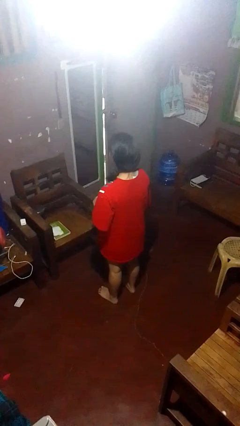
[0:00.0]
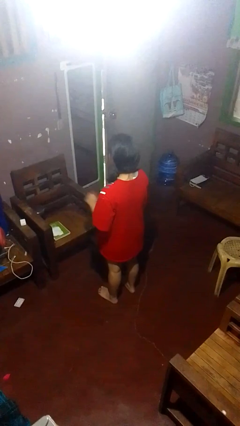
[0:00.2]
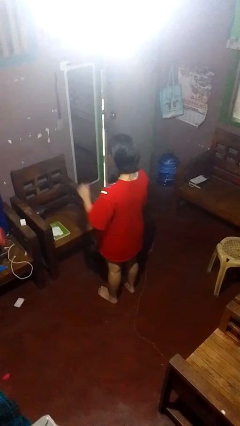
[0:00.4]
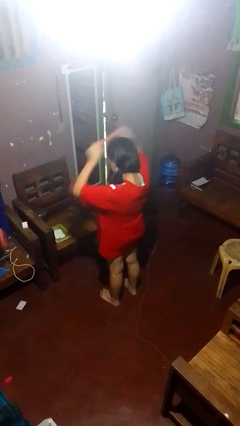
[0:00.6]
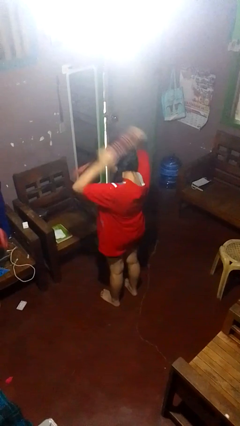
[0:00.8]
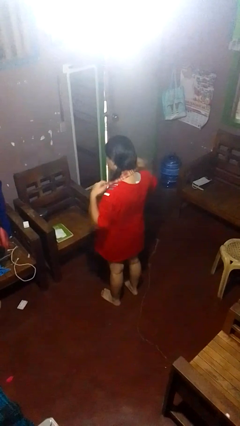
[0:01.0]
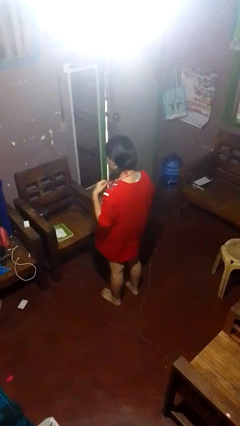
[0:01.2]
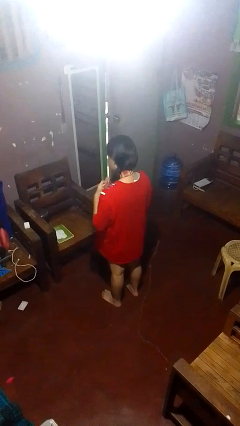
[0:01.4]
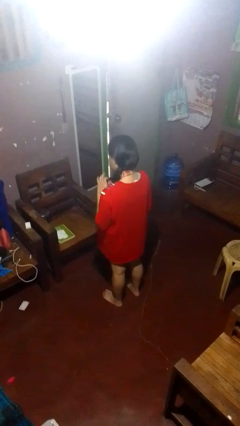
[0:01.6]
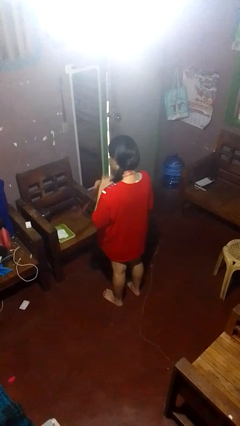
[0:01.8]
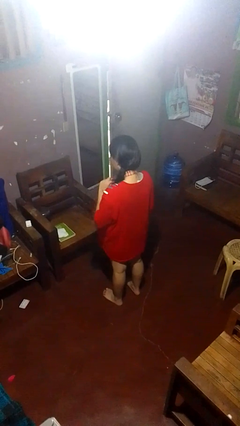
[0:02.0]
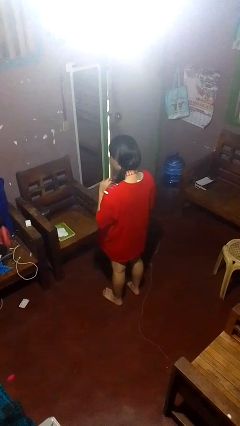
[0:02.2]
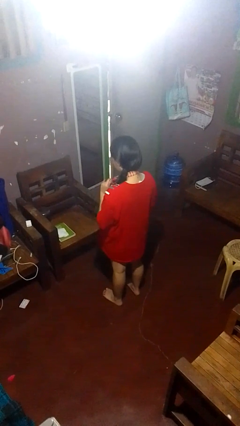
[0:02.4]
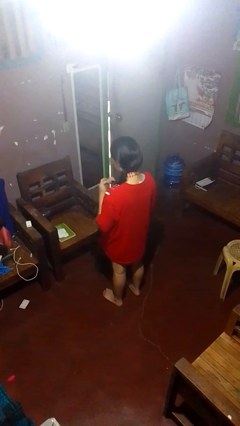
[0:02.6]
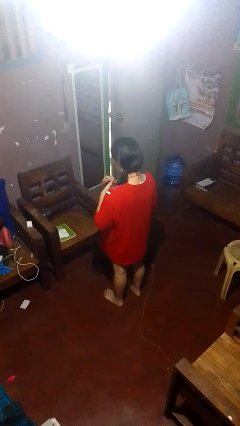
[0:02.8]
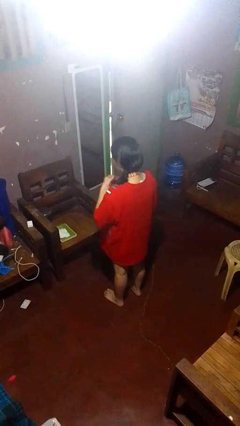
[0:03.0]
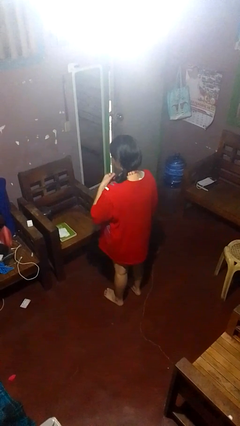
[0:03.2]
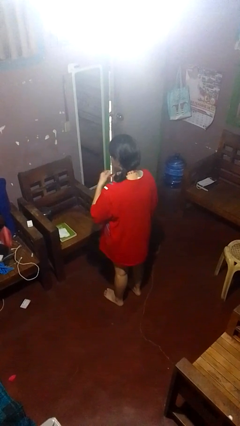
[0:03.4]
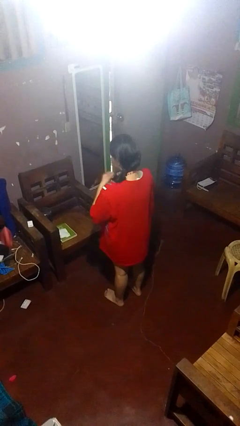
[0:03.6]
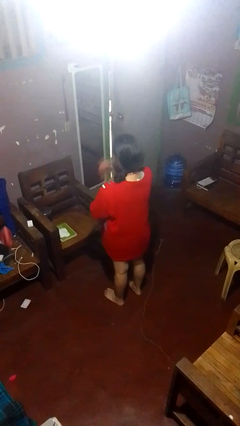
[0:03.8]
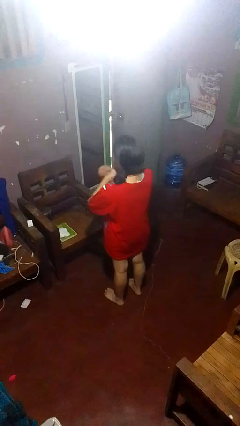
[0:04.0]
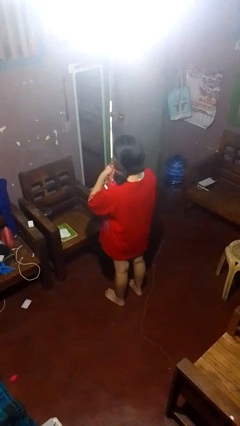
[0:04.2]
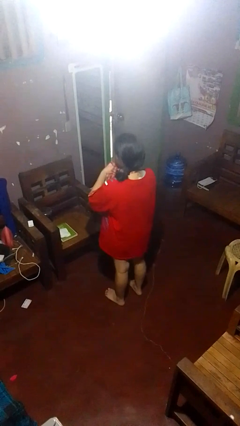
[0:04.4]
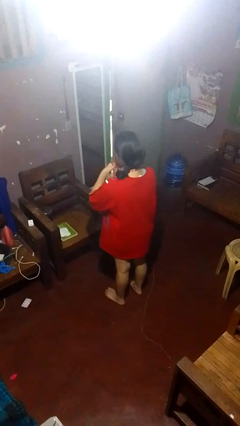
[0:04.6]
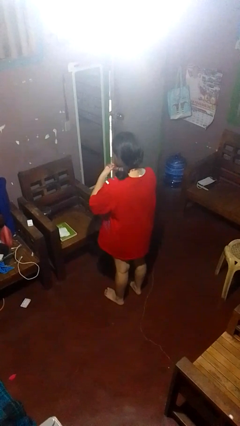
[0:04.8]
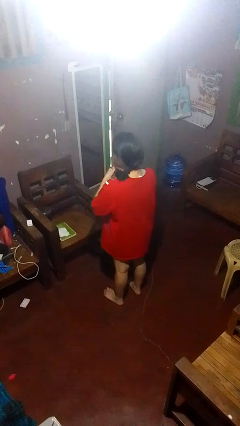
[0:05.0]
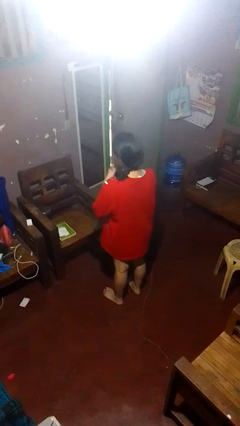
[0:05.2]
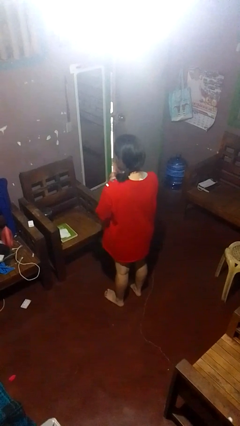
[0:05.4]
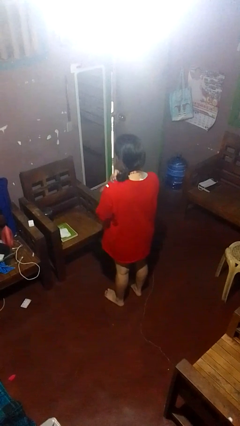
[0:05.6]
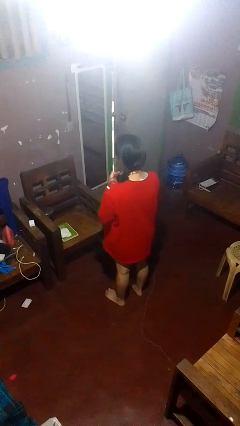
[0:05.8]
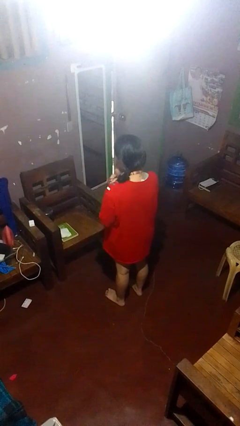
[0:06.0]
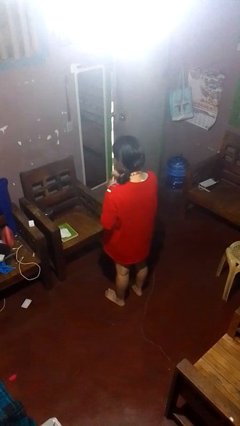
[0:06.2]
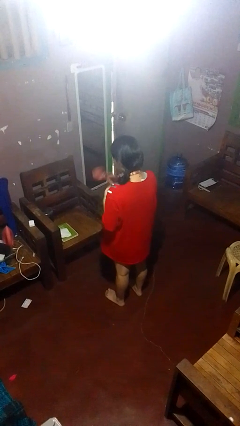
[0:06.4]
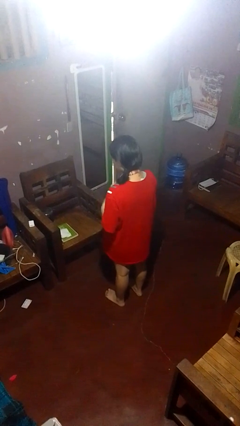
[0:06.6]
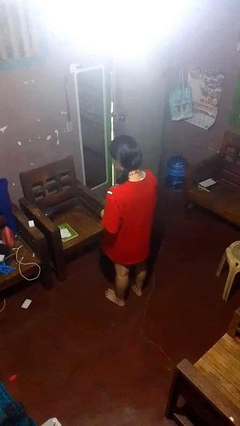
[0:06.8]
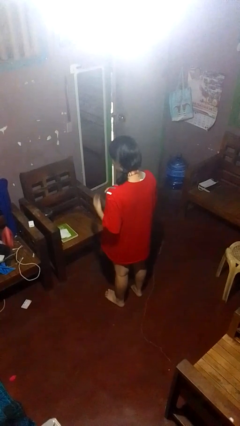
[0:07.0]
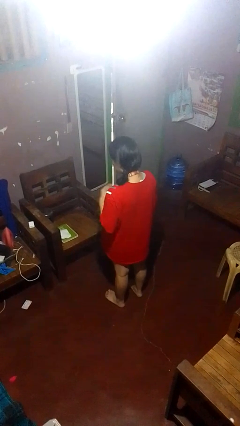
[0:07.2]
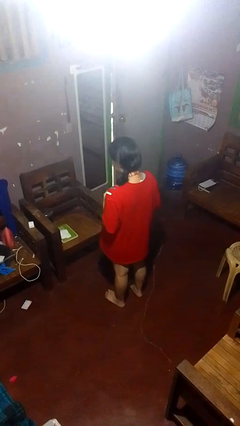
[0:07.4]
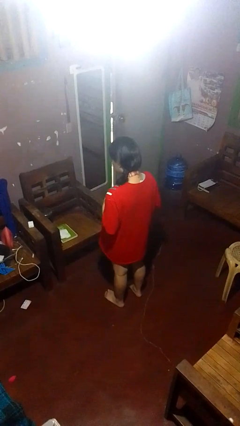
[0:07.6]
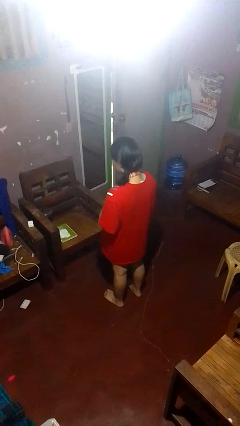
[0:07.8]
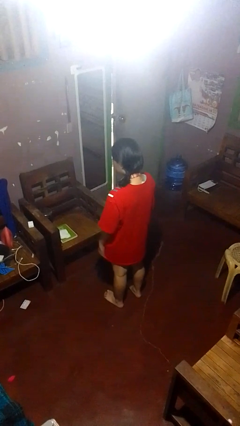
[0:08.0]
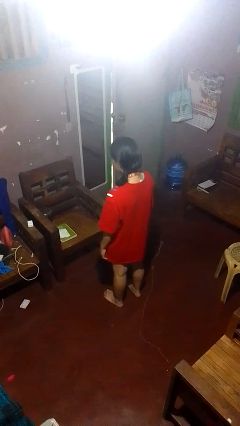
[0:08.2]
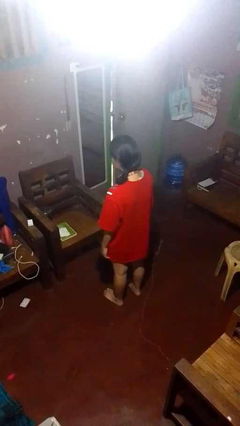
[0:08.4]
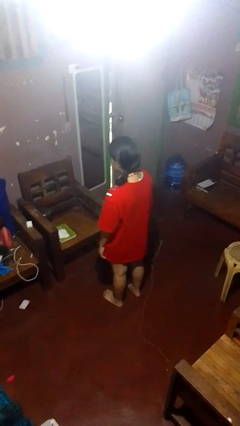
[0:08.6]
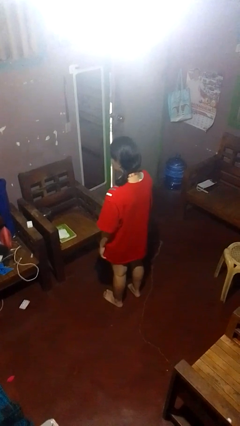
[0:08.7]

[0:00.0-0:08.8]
person puts on necktie

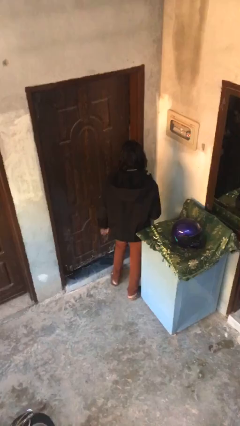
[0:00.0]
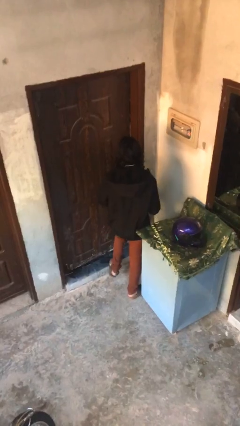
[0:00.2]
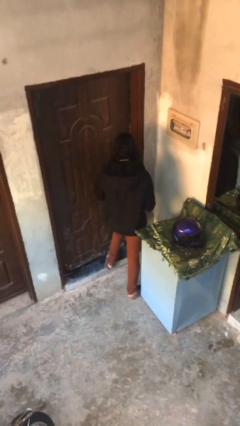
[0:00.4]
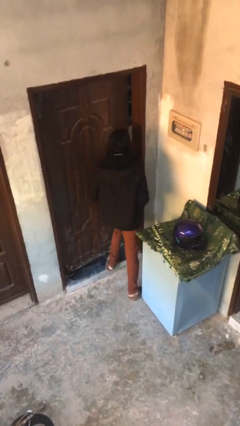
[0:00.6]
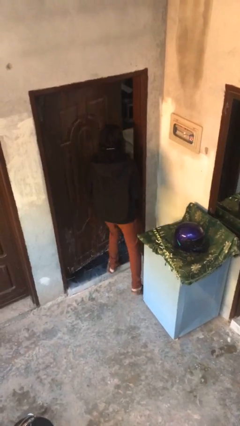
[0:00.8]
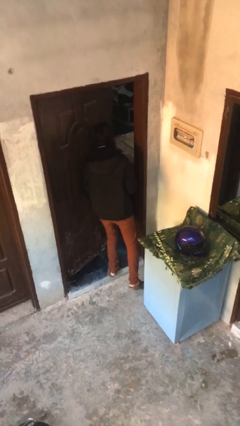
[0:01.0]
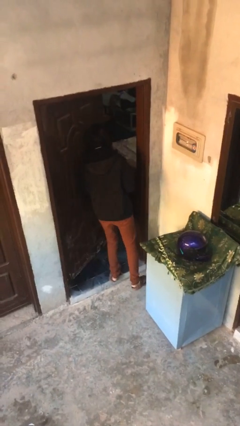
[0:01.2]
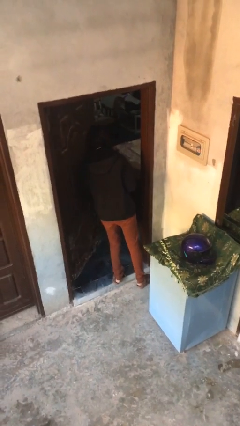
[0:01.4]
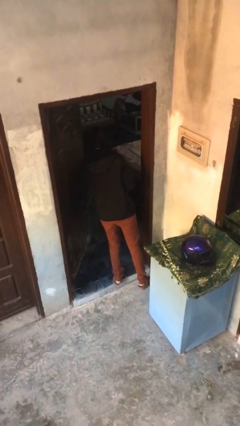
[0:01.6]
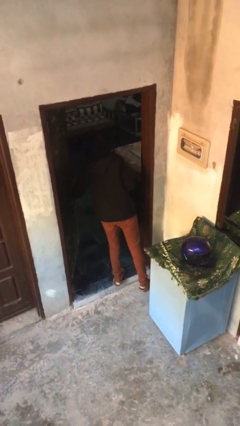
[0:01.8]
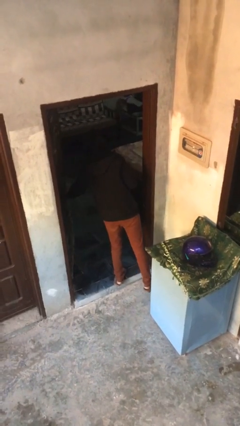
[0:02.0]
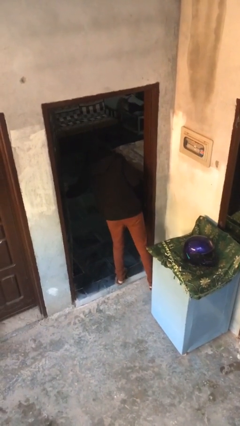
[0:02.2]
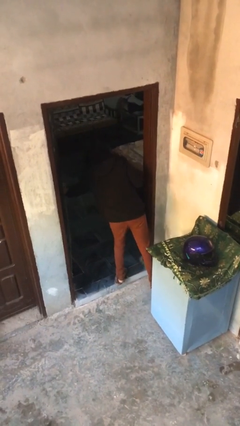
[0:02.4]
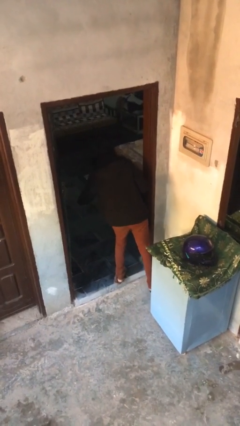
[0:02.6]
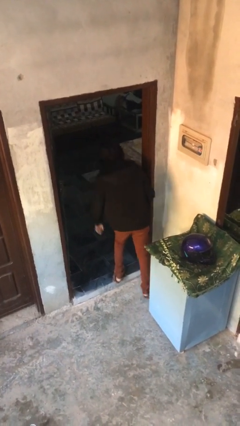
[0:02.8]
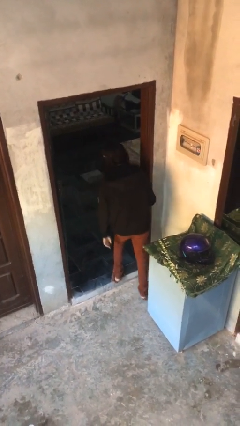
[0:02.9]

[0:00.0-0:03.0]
person opens facility door

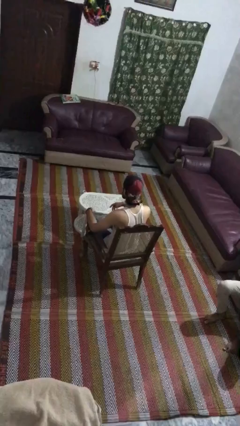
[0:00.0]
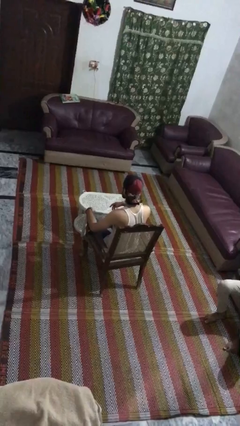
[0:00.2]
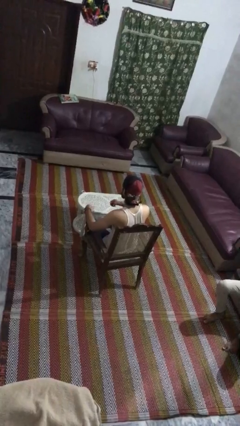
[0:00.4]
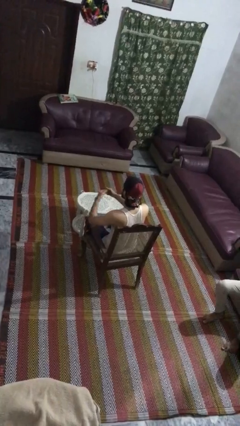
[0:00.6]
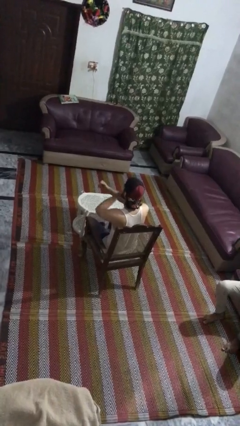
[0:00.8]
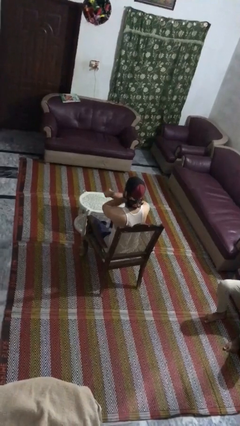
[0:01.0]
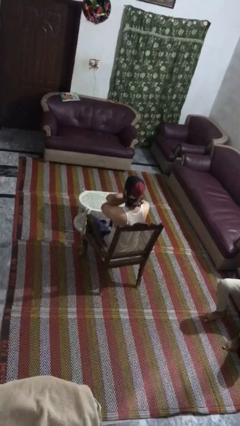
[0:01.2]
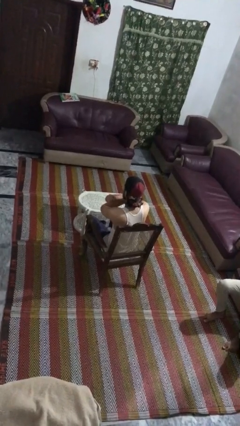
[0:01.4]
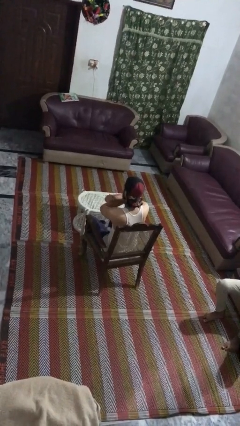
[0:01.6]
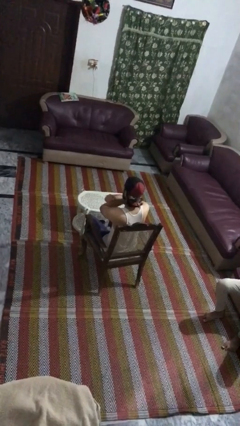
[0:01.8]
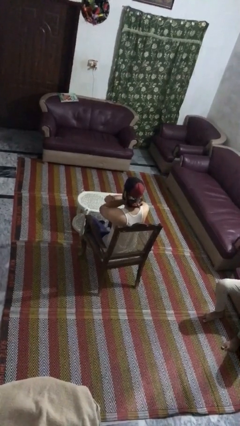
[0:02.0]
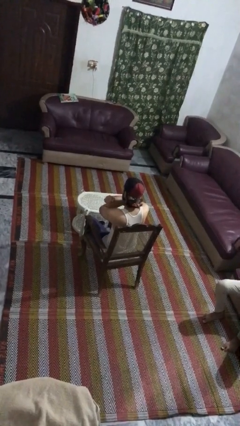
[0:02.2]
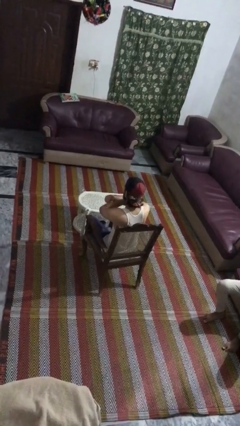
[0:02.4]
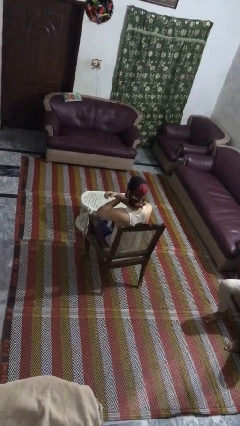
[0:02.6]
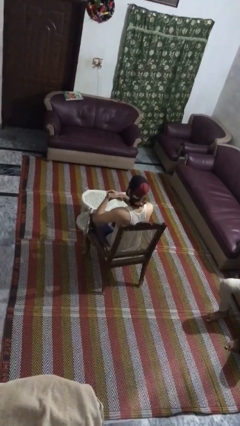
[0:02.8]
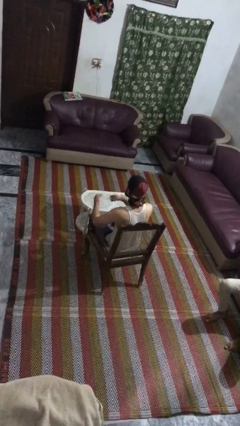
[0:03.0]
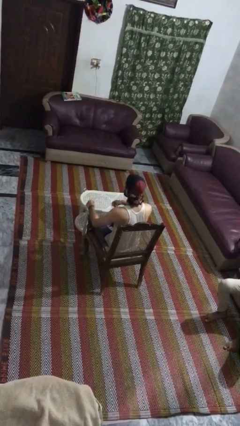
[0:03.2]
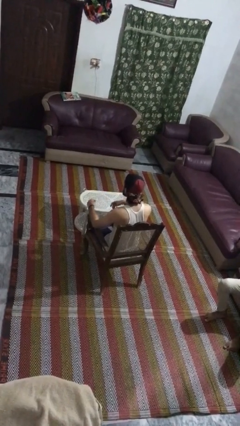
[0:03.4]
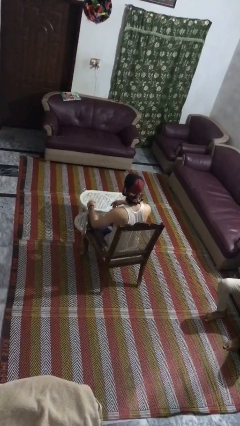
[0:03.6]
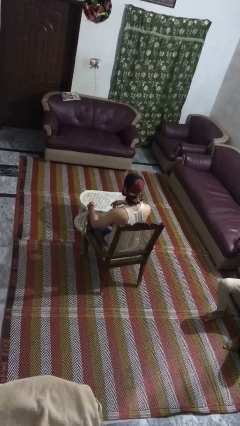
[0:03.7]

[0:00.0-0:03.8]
person gestures arms x

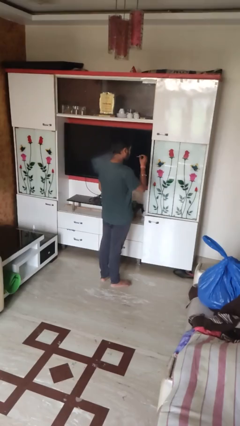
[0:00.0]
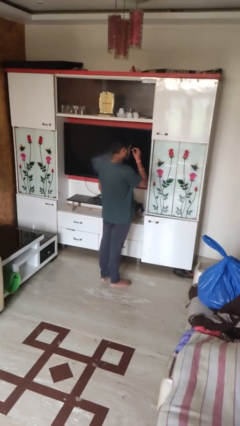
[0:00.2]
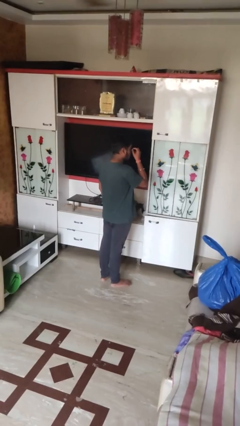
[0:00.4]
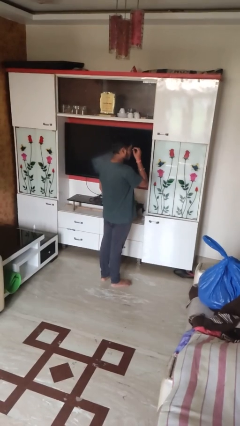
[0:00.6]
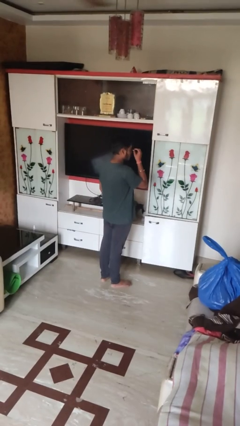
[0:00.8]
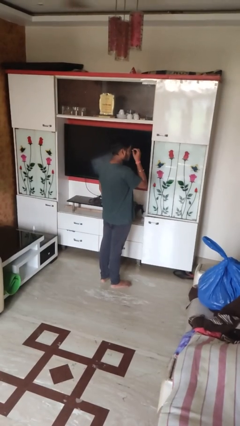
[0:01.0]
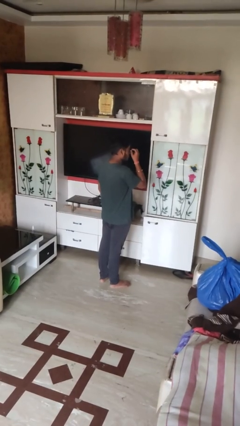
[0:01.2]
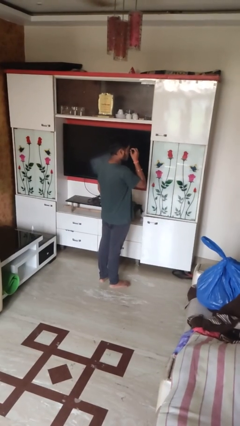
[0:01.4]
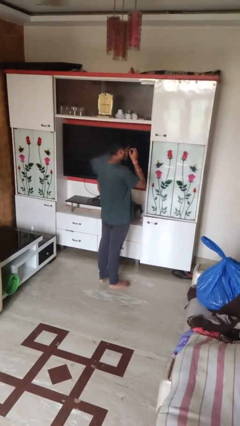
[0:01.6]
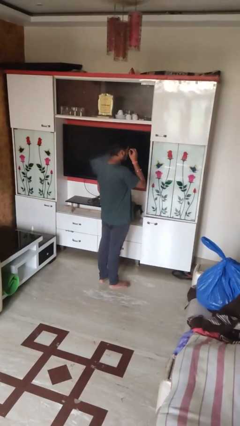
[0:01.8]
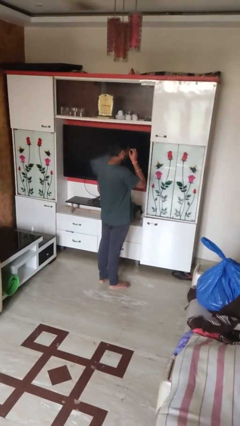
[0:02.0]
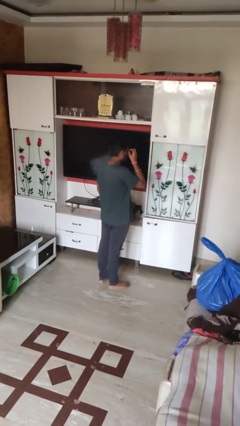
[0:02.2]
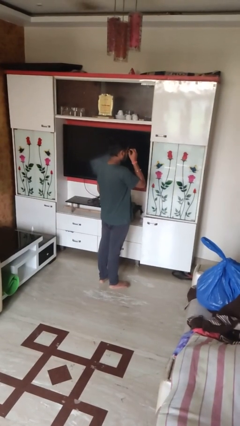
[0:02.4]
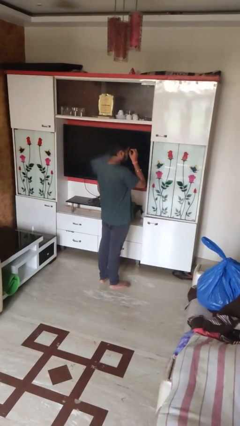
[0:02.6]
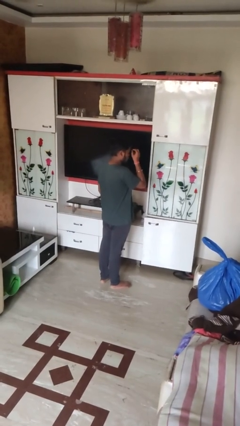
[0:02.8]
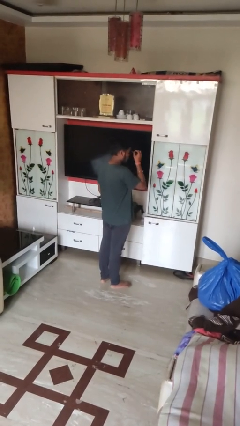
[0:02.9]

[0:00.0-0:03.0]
person applies eye makeup
